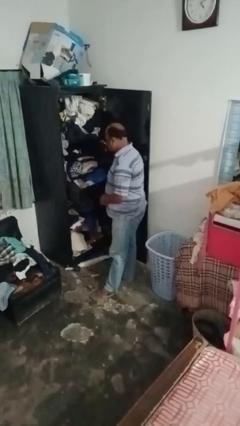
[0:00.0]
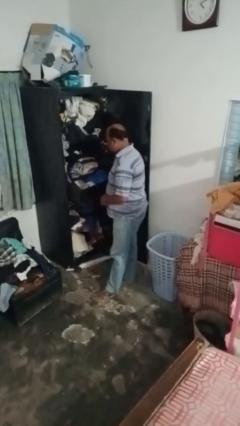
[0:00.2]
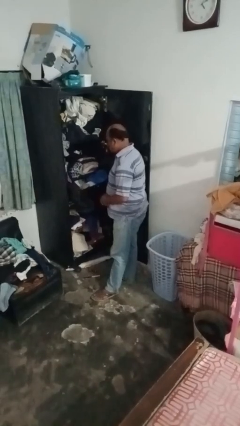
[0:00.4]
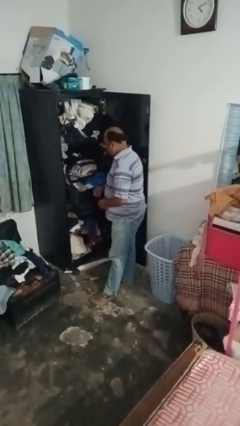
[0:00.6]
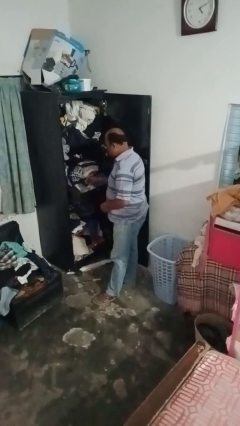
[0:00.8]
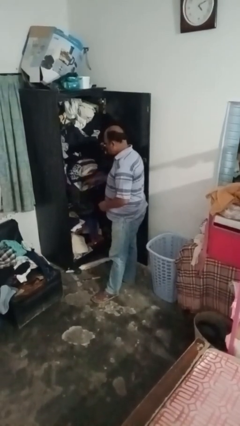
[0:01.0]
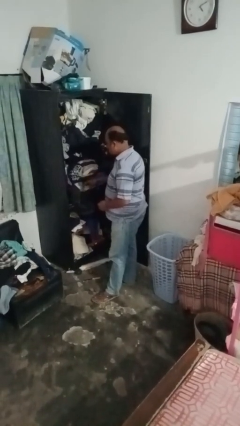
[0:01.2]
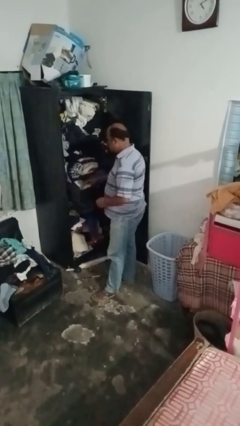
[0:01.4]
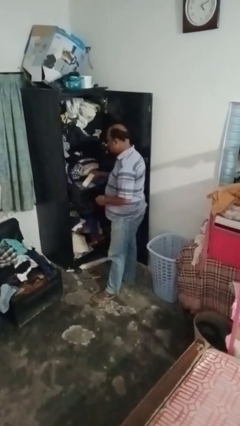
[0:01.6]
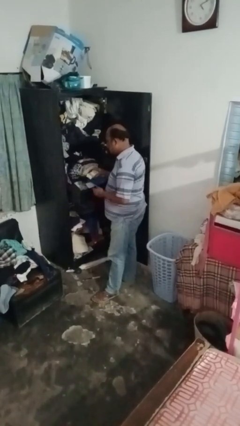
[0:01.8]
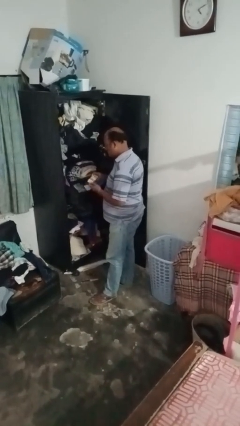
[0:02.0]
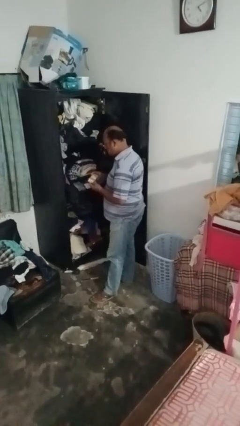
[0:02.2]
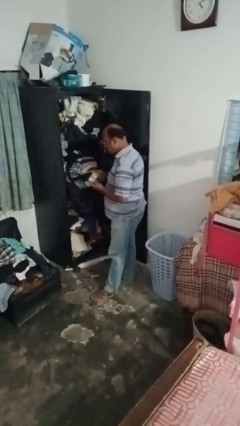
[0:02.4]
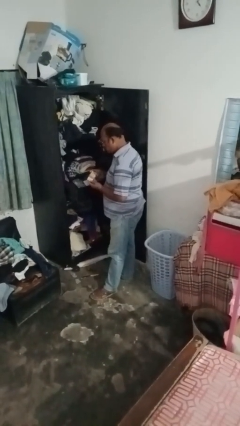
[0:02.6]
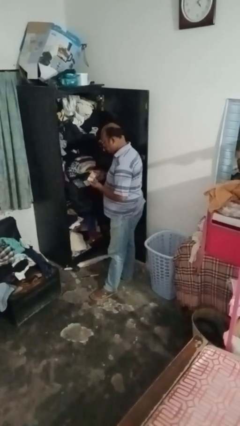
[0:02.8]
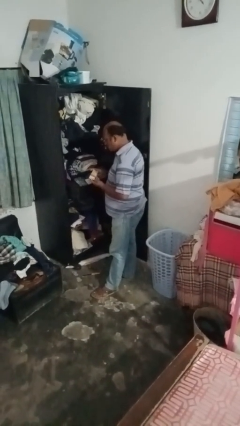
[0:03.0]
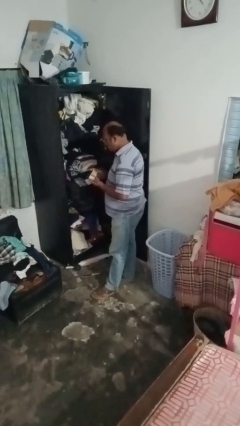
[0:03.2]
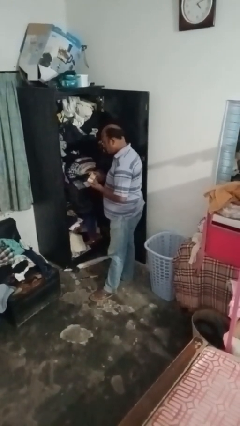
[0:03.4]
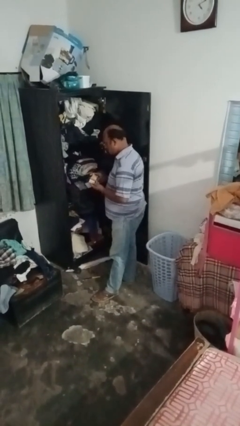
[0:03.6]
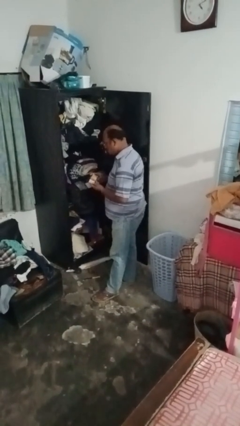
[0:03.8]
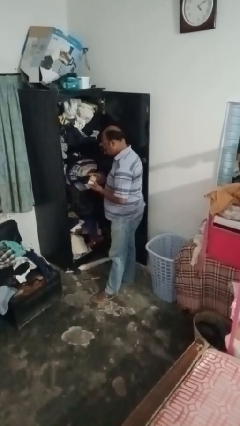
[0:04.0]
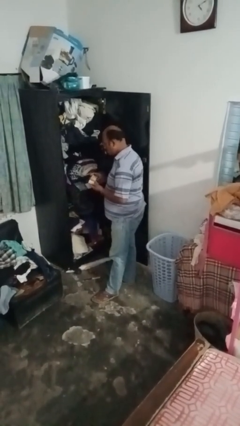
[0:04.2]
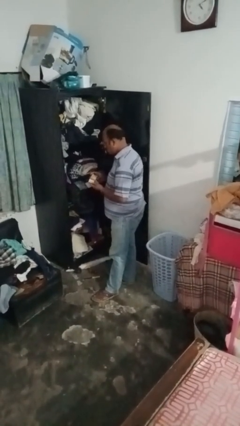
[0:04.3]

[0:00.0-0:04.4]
person puts clothes into dresser

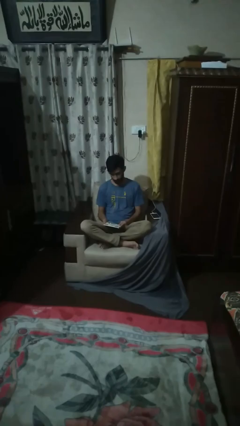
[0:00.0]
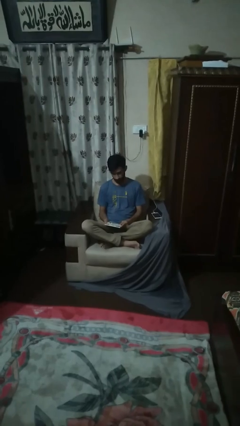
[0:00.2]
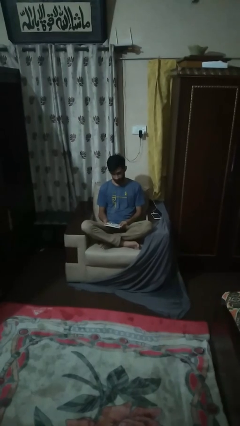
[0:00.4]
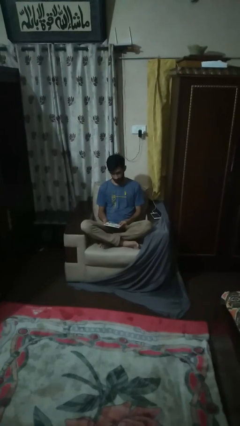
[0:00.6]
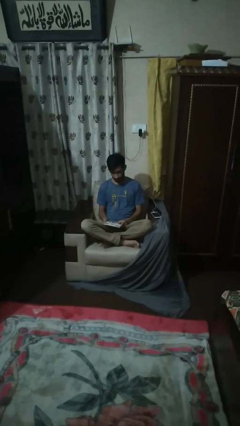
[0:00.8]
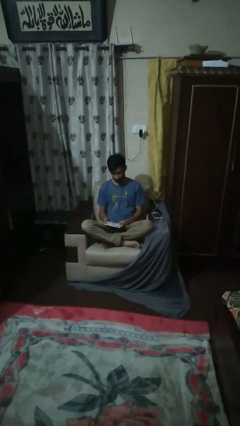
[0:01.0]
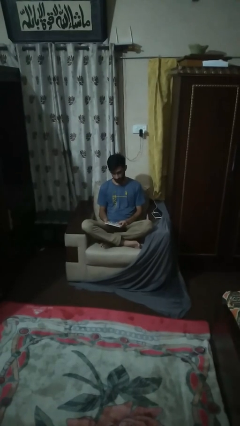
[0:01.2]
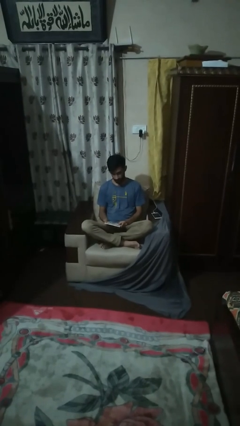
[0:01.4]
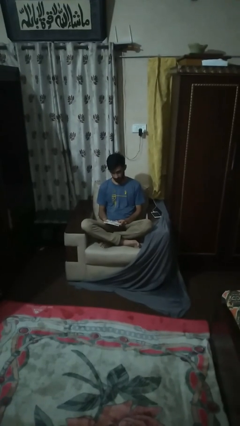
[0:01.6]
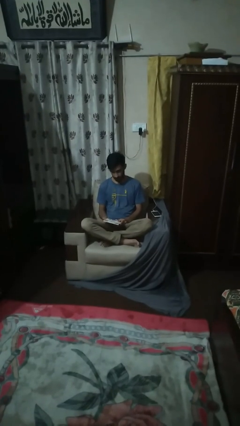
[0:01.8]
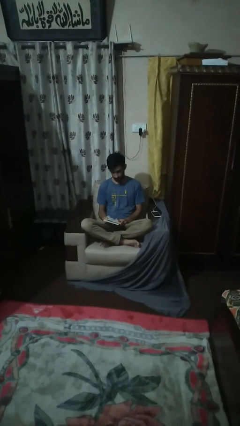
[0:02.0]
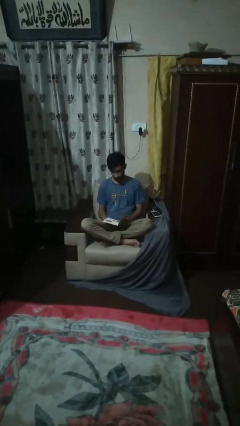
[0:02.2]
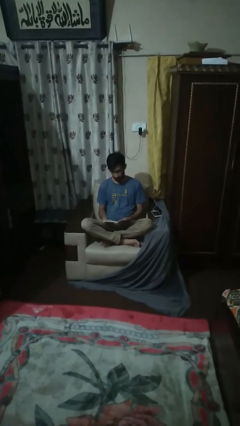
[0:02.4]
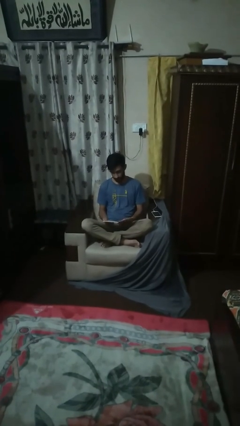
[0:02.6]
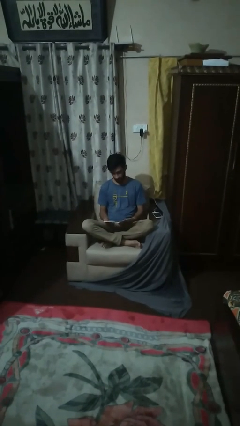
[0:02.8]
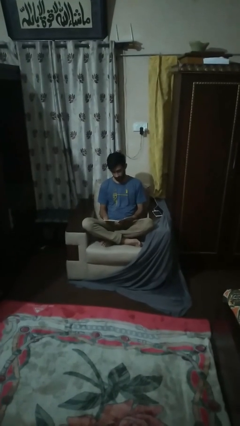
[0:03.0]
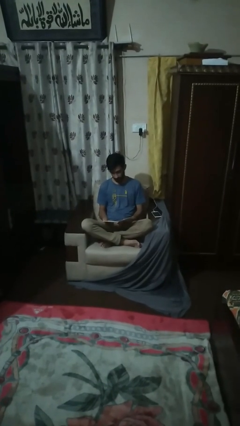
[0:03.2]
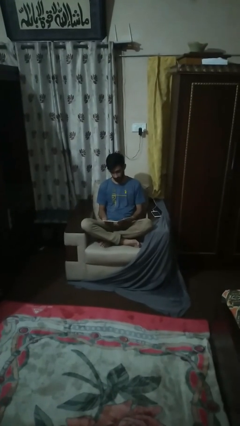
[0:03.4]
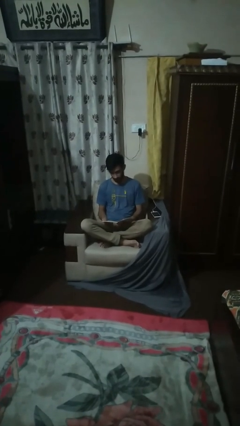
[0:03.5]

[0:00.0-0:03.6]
person reads book

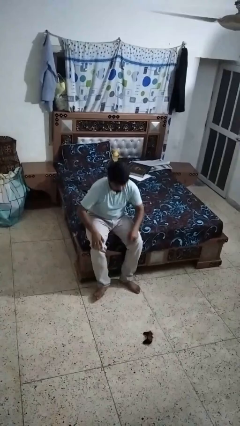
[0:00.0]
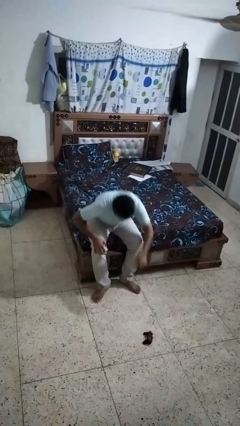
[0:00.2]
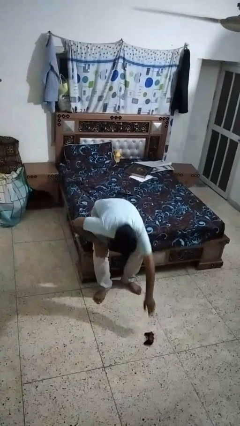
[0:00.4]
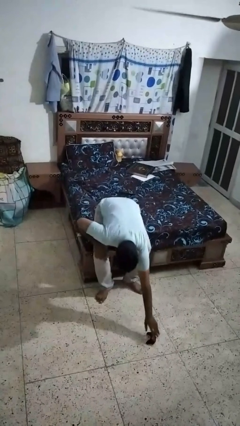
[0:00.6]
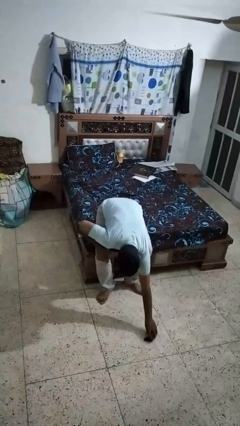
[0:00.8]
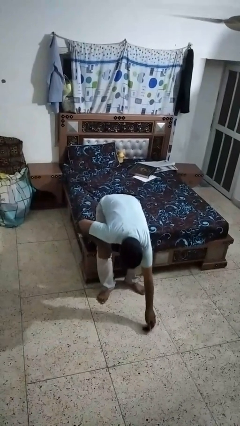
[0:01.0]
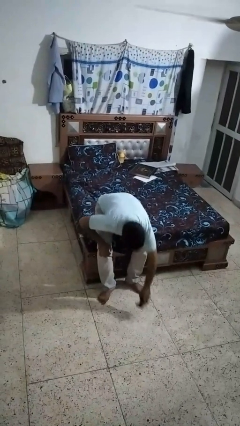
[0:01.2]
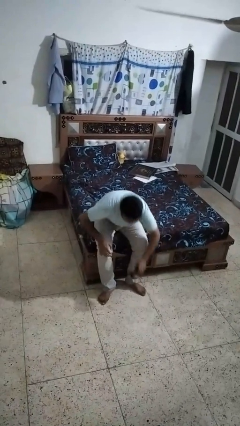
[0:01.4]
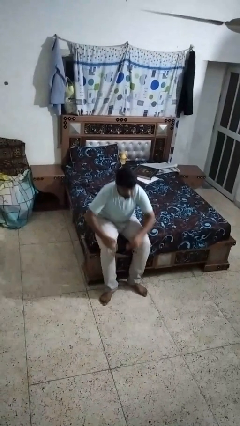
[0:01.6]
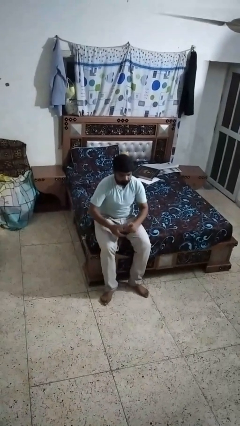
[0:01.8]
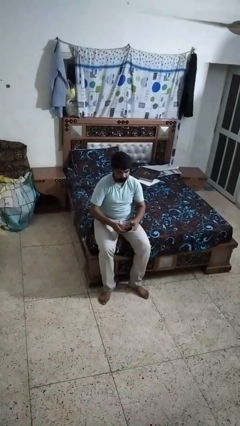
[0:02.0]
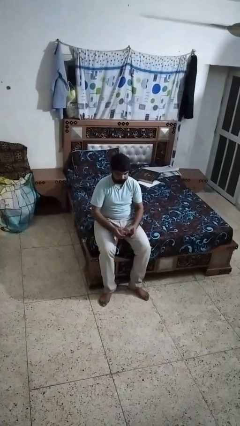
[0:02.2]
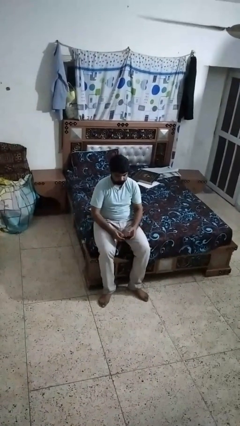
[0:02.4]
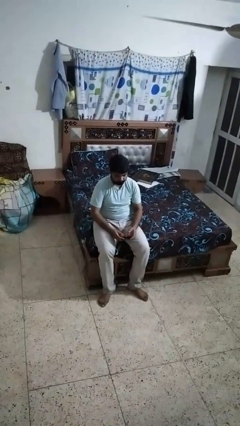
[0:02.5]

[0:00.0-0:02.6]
person picks up object from floor

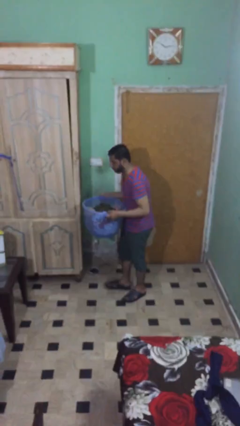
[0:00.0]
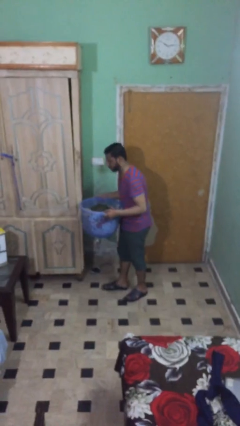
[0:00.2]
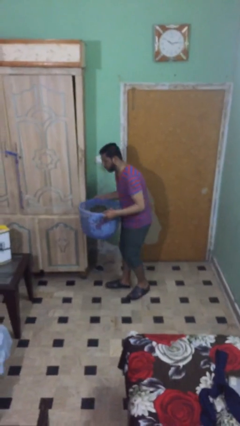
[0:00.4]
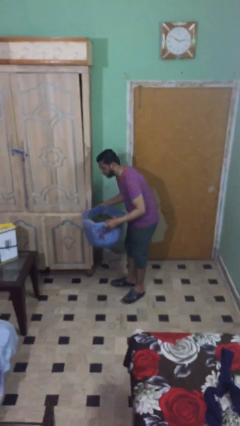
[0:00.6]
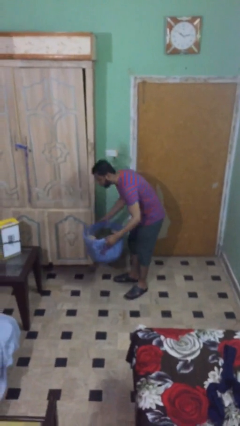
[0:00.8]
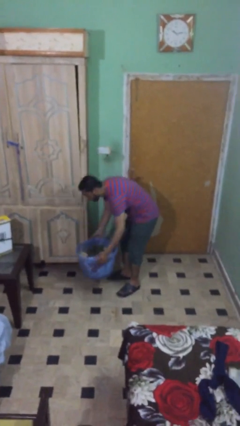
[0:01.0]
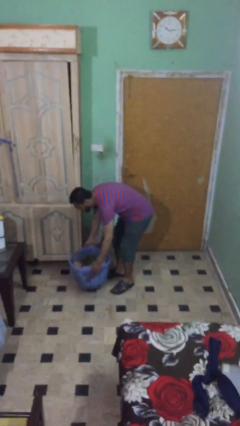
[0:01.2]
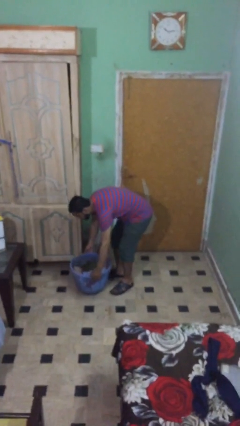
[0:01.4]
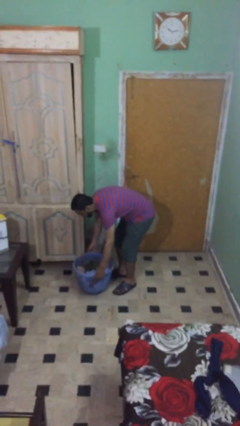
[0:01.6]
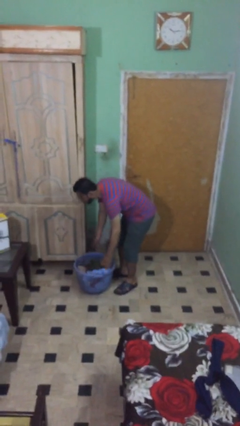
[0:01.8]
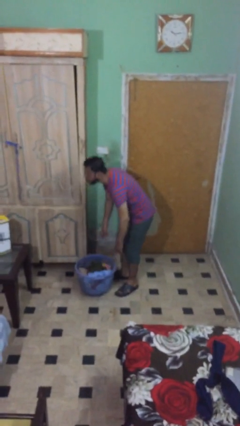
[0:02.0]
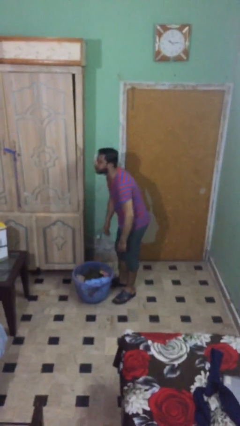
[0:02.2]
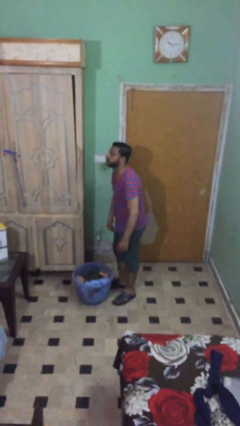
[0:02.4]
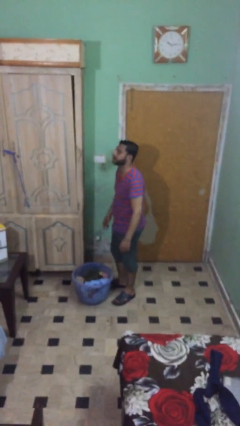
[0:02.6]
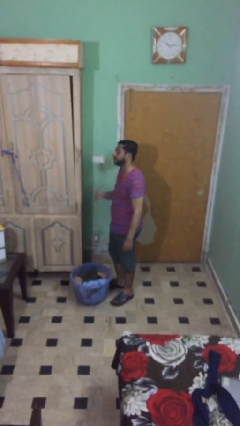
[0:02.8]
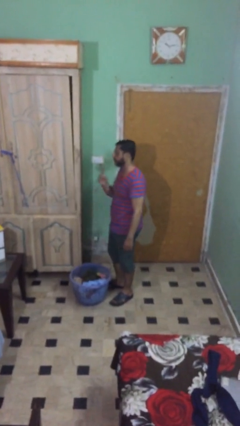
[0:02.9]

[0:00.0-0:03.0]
person puts down object on floor

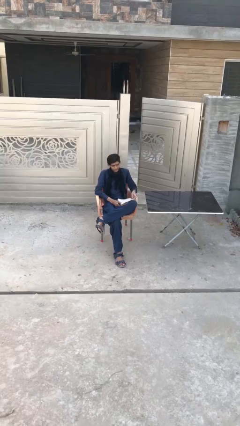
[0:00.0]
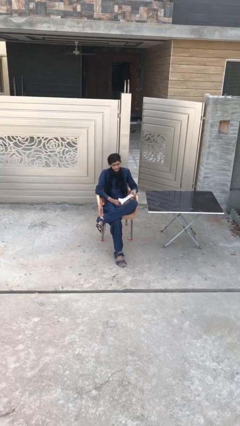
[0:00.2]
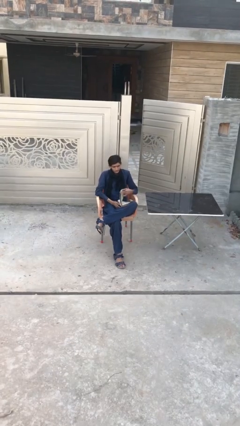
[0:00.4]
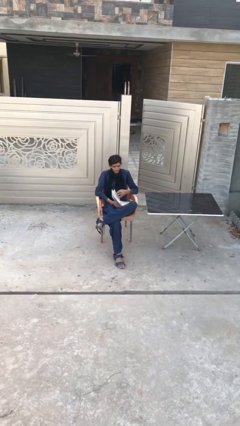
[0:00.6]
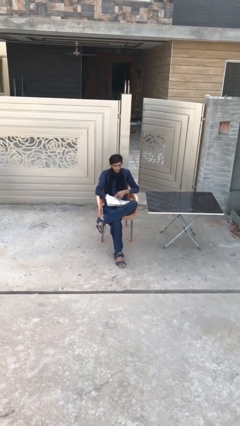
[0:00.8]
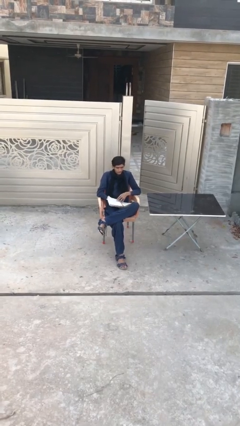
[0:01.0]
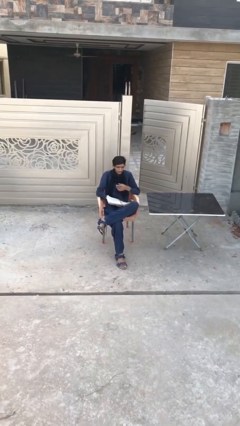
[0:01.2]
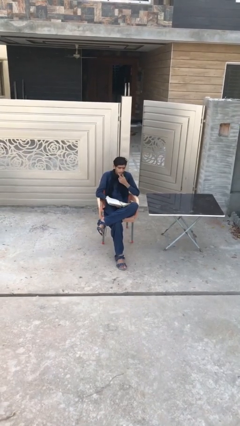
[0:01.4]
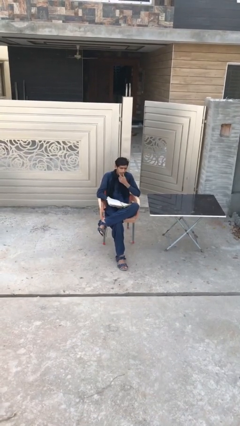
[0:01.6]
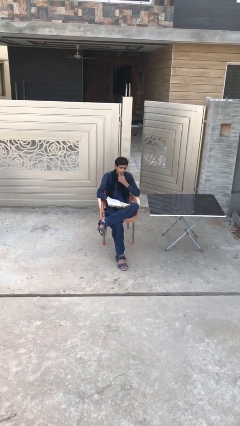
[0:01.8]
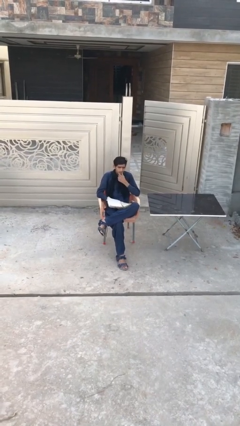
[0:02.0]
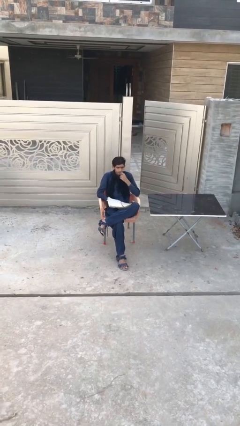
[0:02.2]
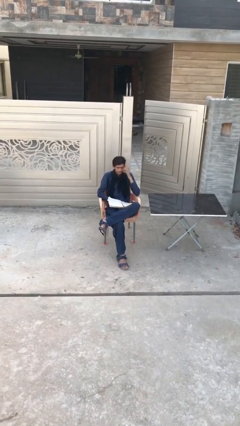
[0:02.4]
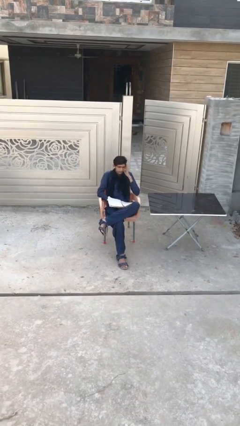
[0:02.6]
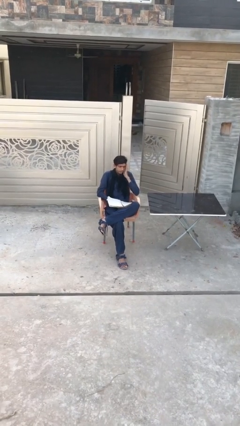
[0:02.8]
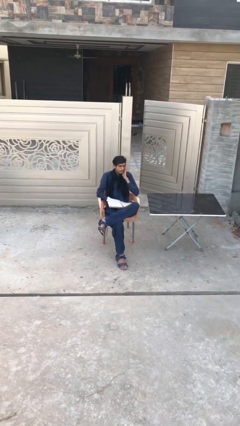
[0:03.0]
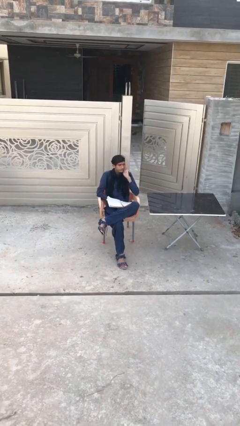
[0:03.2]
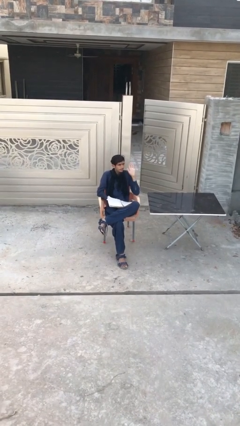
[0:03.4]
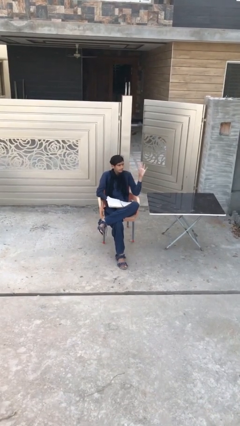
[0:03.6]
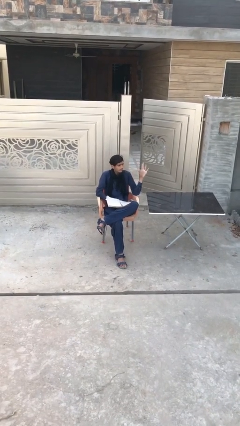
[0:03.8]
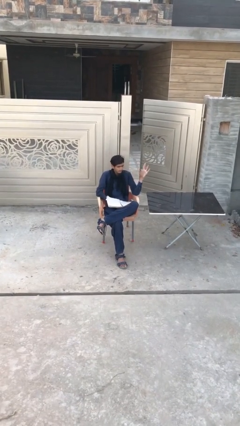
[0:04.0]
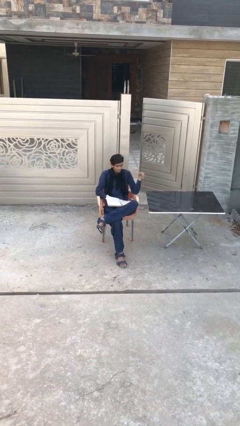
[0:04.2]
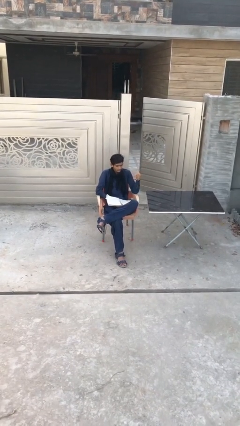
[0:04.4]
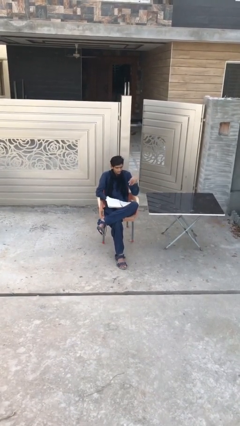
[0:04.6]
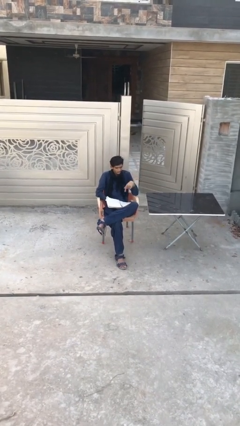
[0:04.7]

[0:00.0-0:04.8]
person reads document
